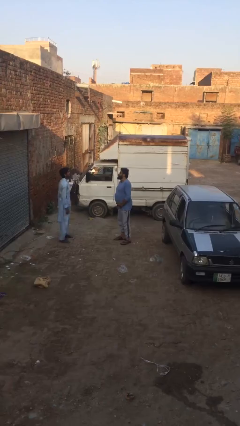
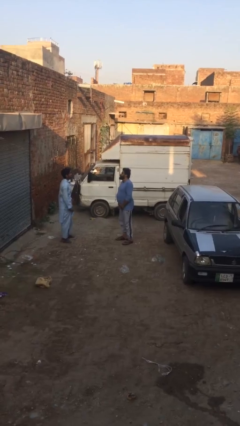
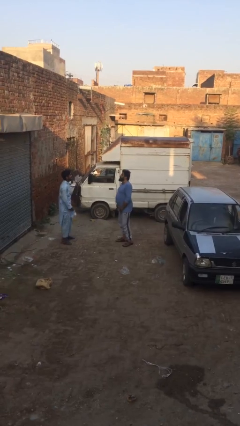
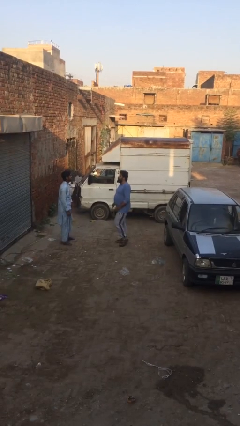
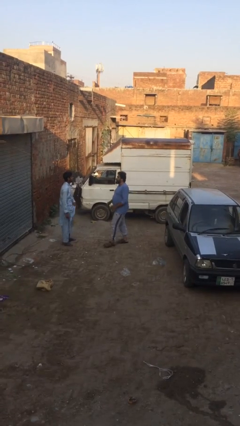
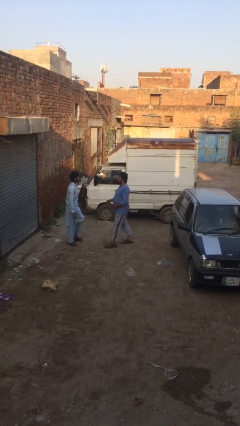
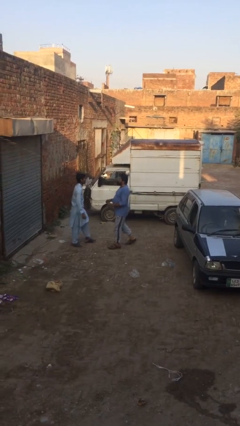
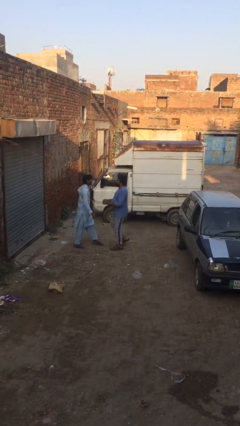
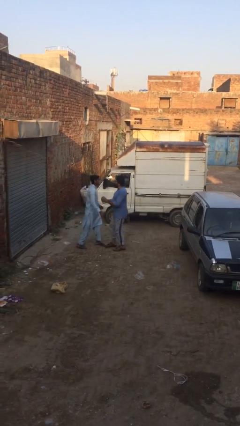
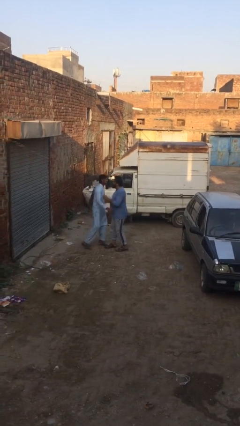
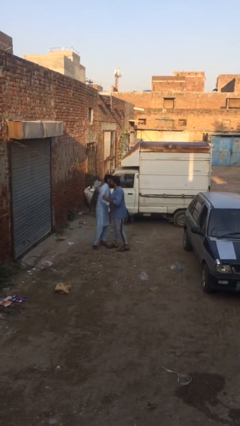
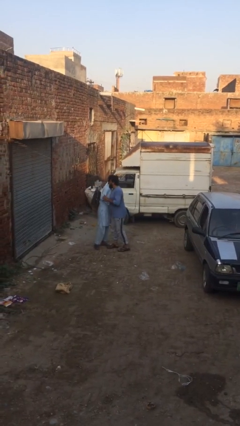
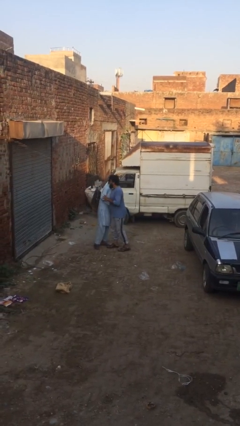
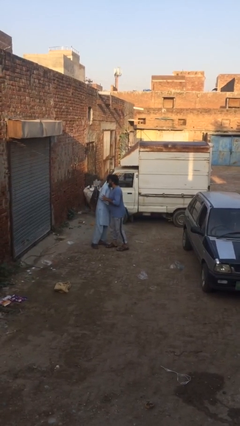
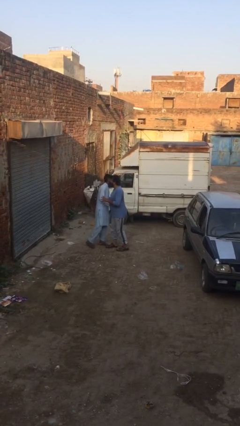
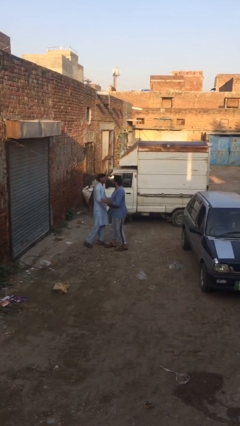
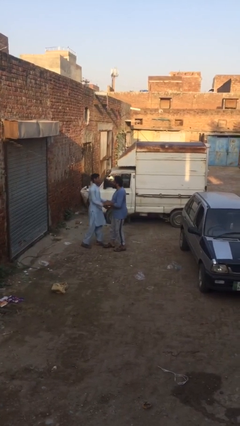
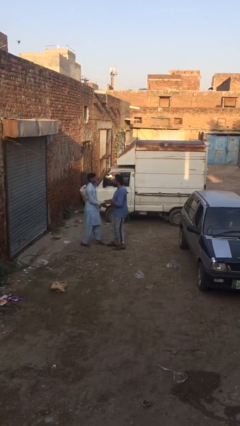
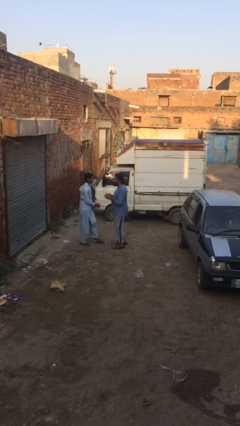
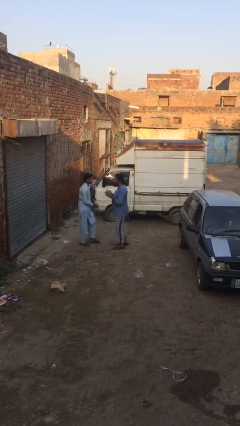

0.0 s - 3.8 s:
person embraces person

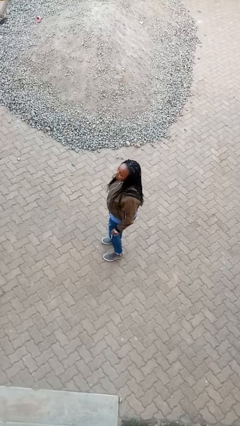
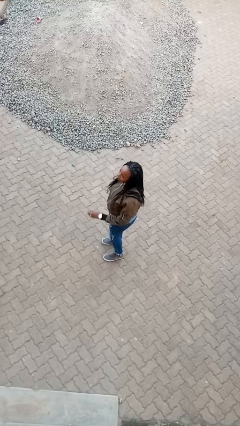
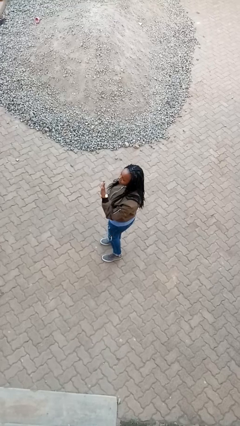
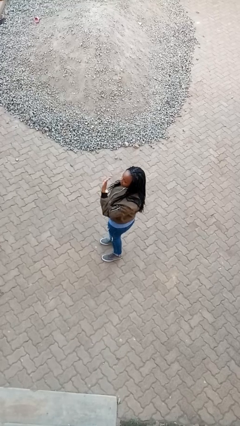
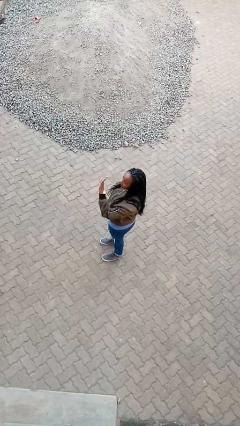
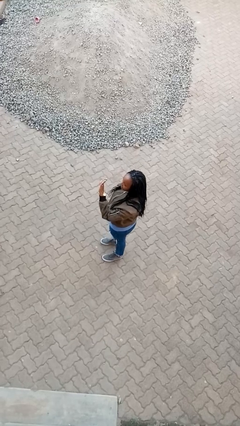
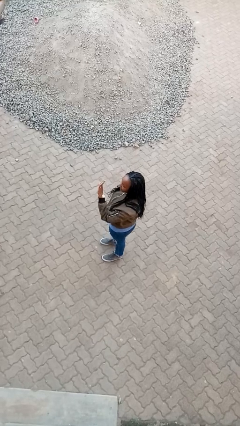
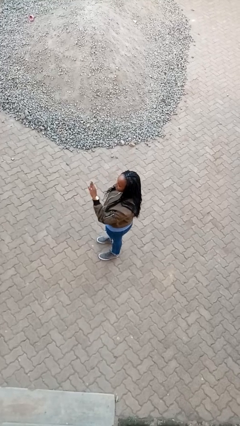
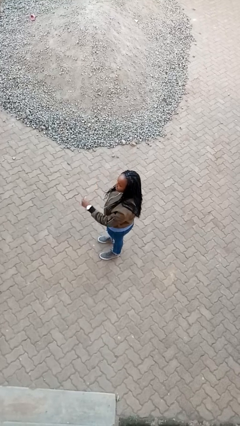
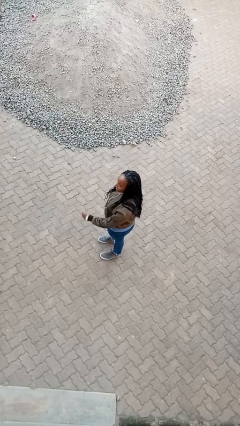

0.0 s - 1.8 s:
person gestures stop

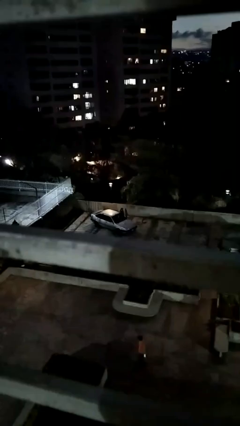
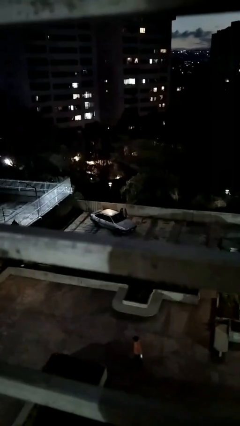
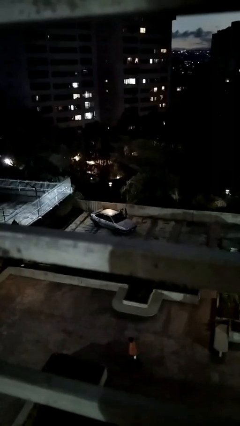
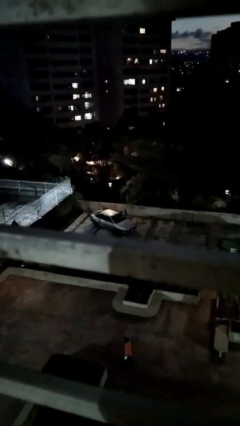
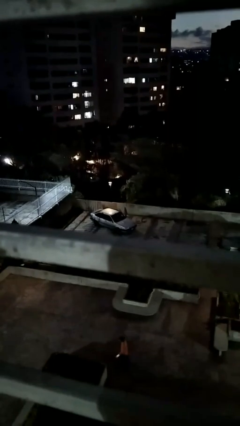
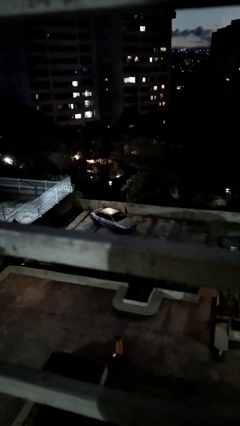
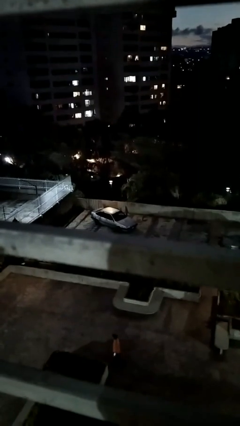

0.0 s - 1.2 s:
person enters car

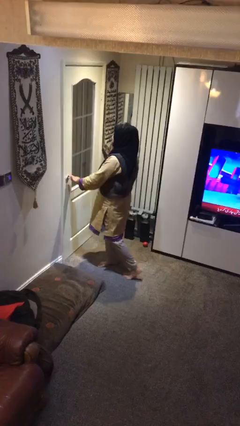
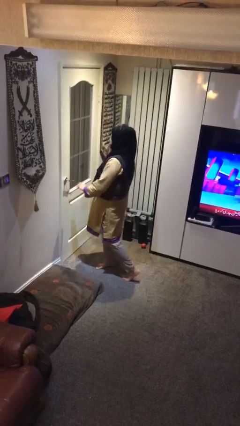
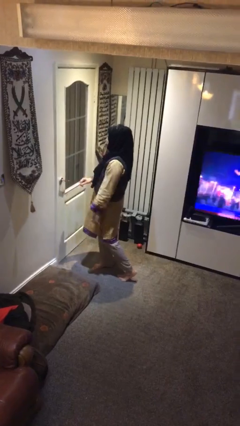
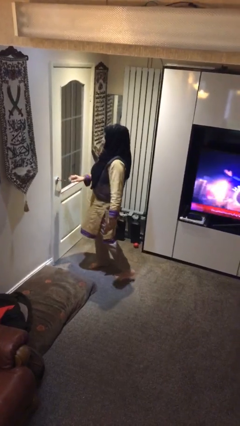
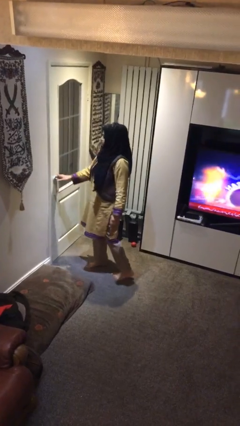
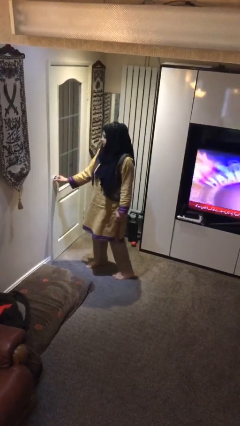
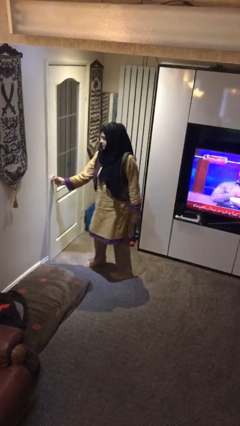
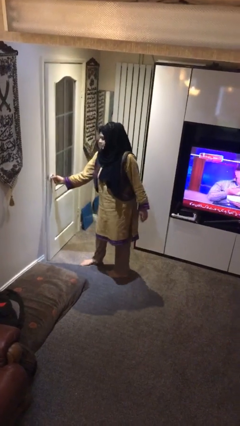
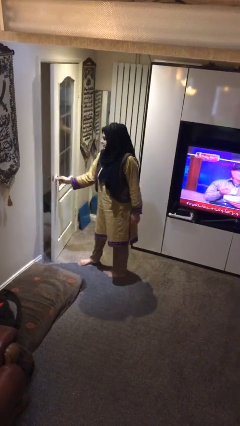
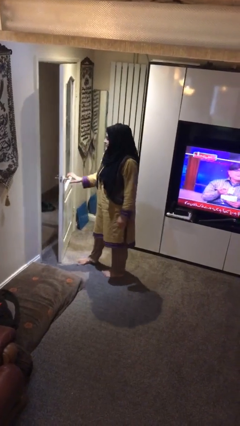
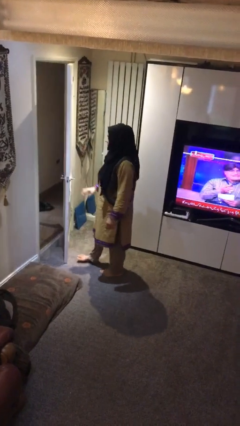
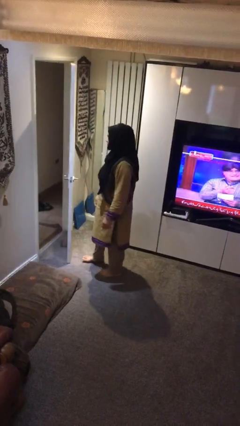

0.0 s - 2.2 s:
person opens facility door

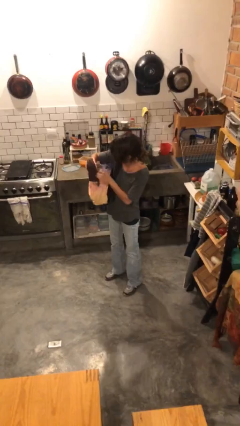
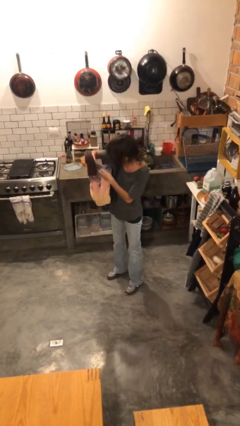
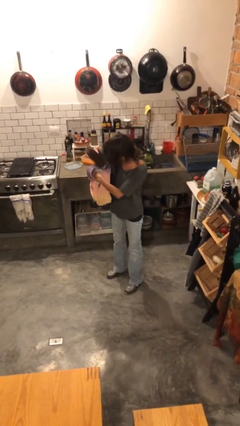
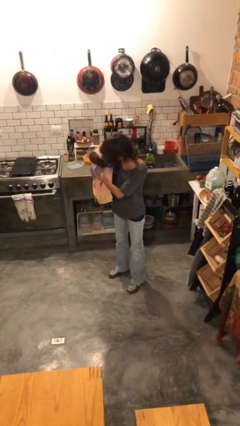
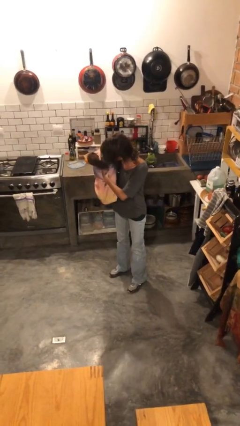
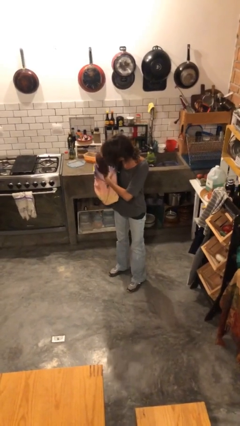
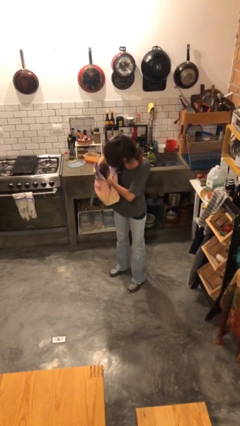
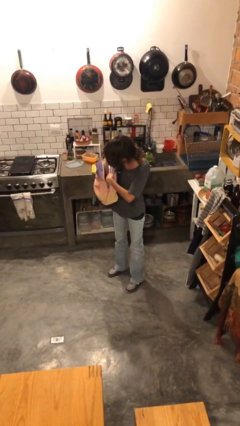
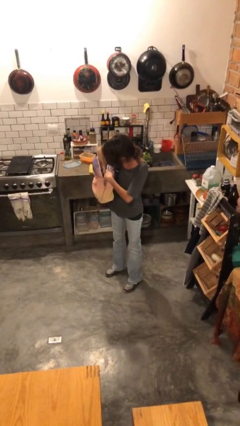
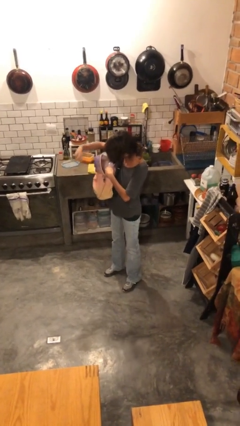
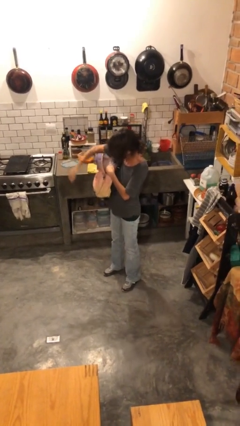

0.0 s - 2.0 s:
person puts object into backpack

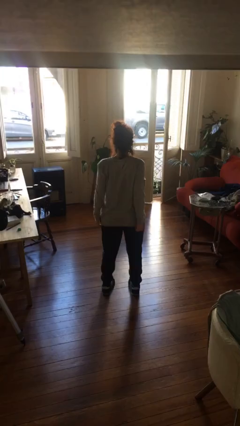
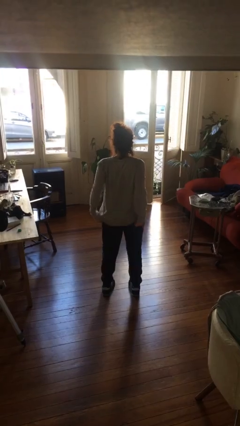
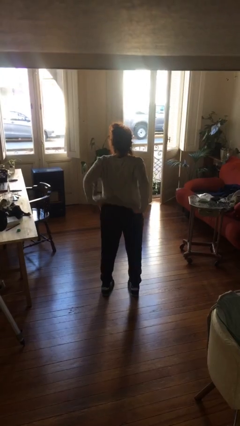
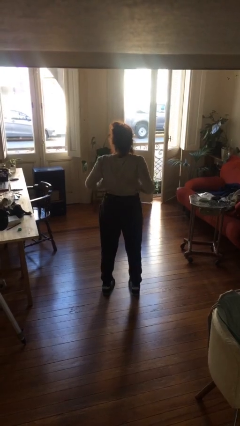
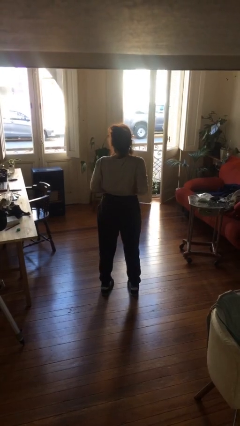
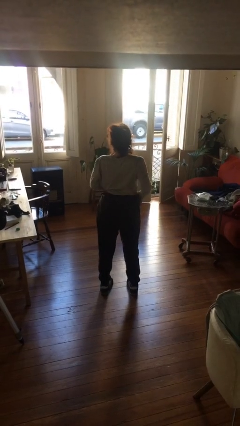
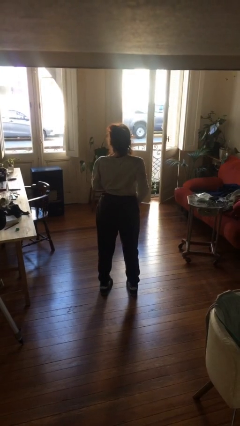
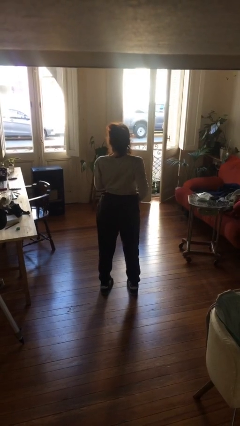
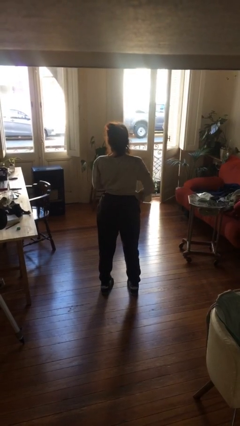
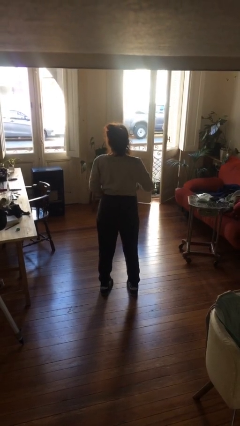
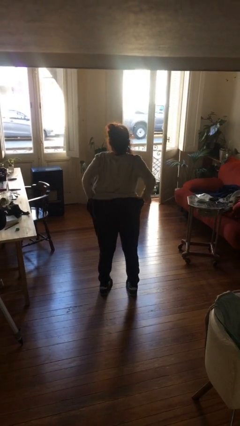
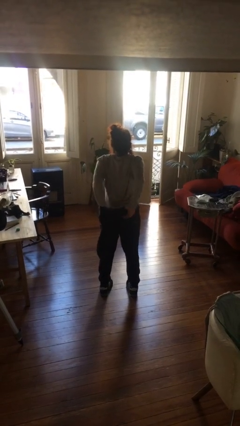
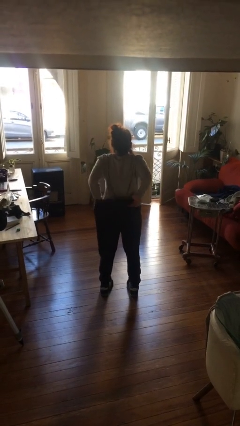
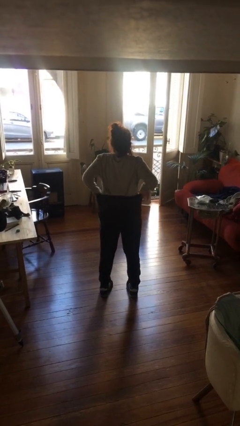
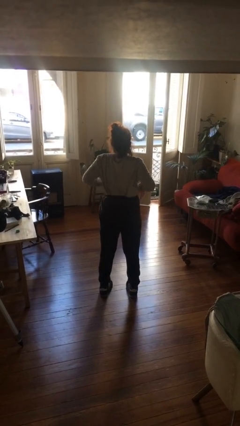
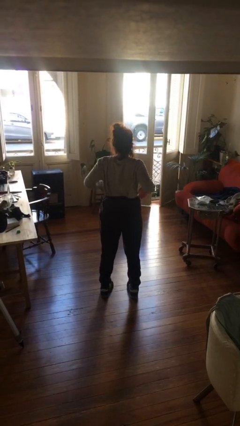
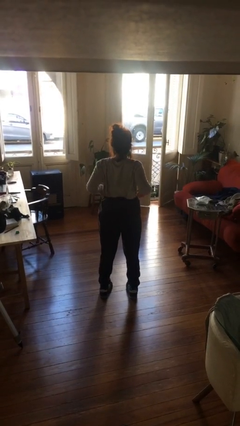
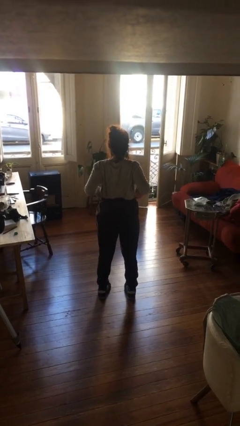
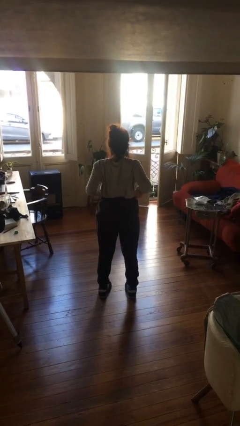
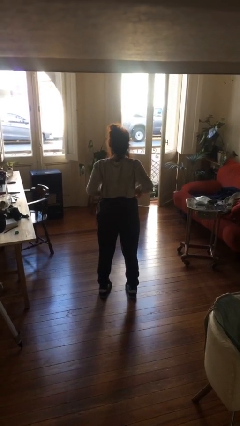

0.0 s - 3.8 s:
person tucks in shirt

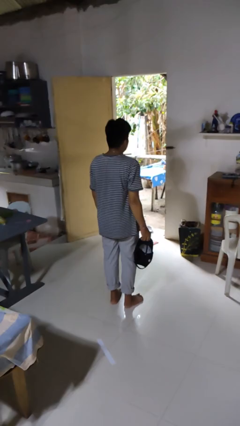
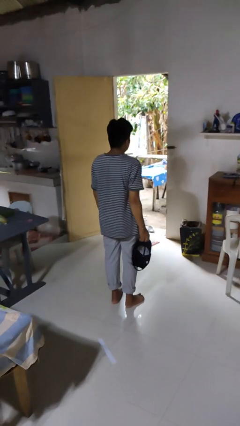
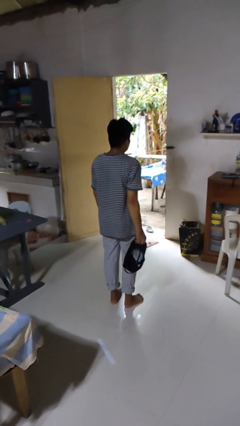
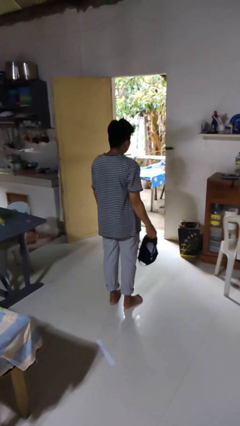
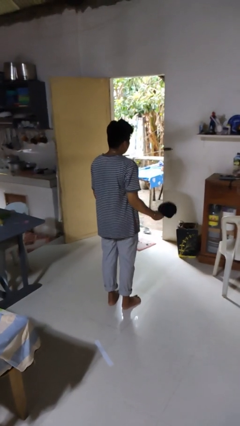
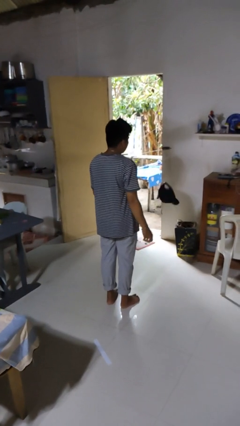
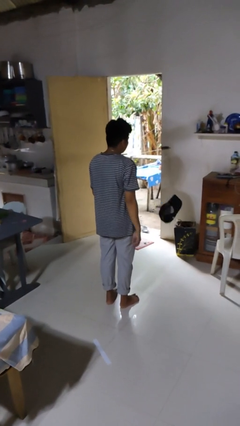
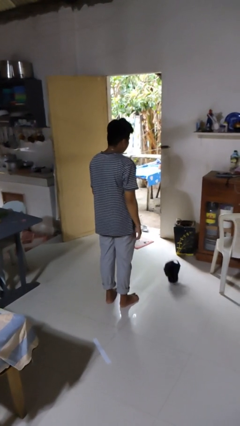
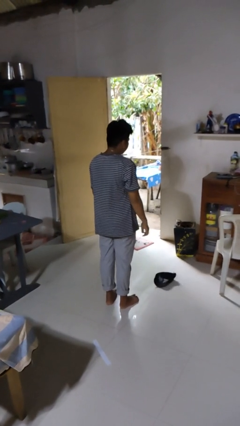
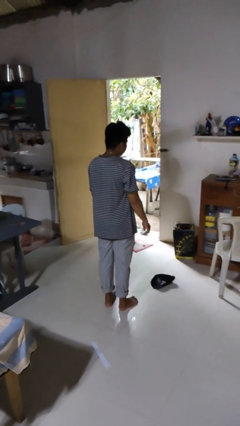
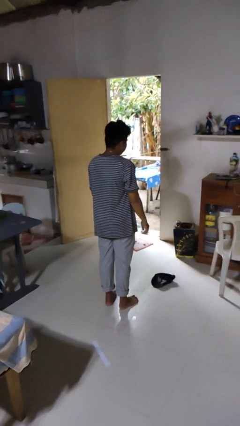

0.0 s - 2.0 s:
person throws object into air

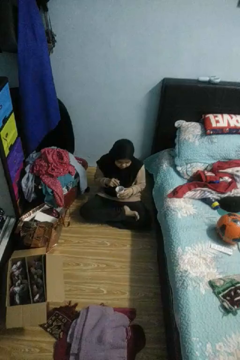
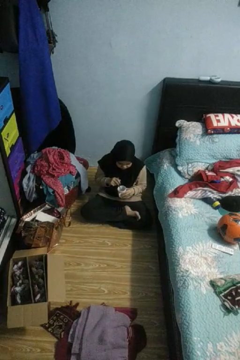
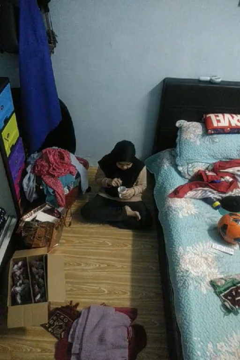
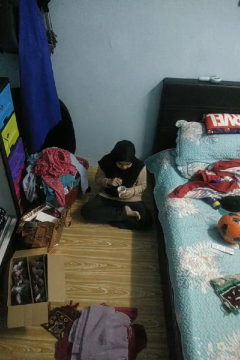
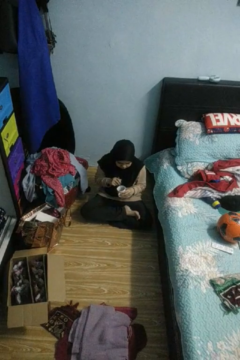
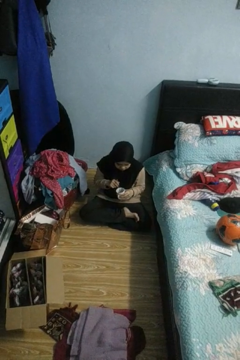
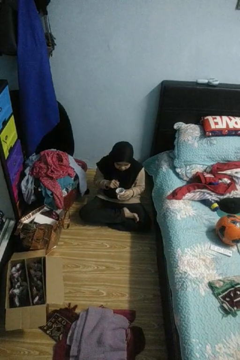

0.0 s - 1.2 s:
person stirs mug
